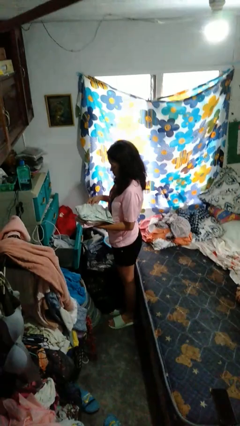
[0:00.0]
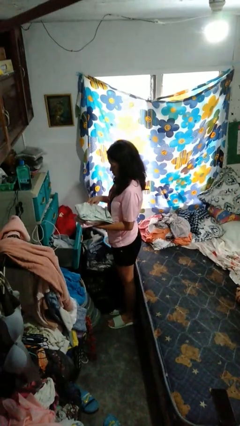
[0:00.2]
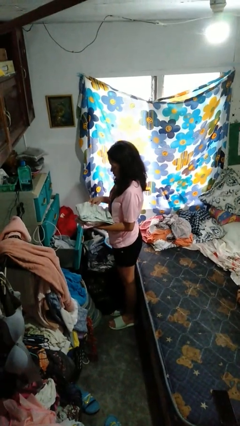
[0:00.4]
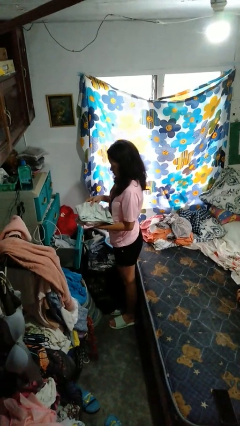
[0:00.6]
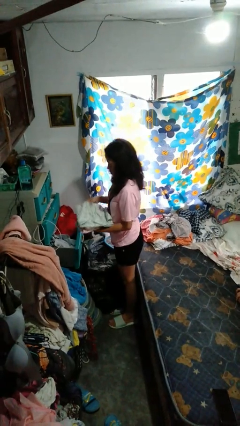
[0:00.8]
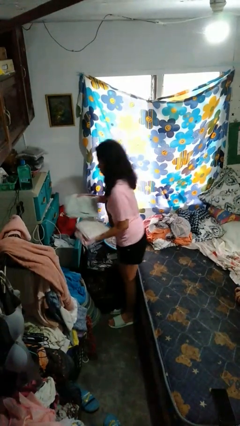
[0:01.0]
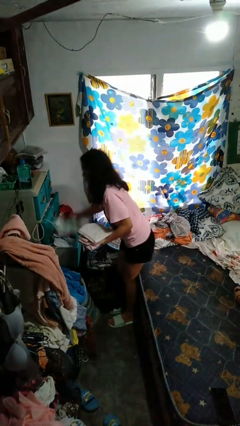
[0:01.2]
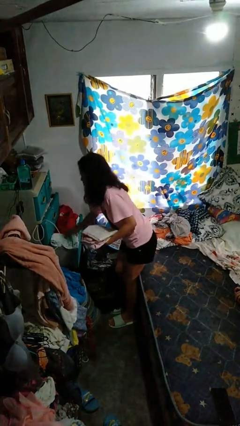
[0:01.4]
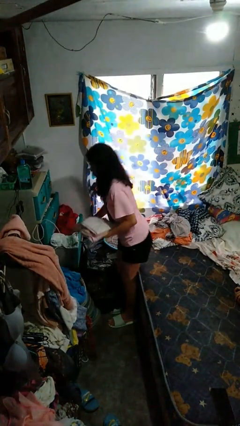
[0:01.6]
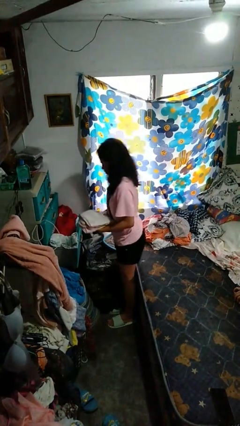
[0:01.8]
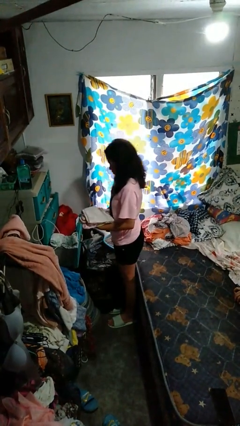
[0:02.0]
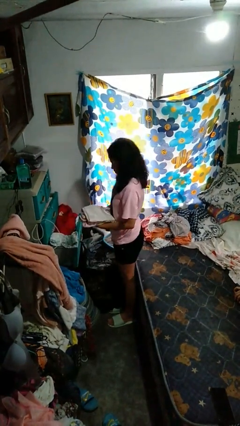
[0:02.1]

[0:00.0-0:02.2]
person puts clothes into dresser

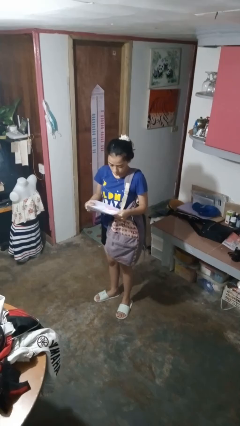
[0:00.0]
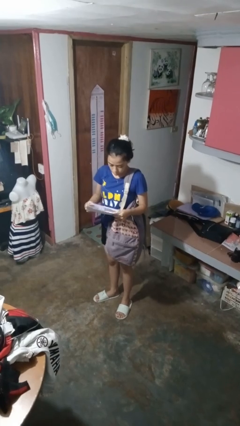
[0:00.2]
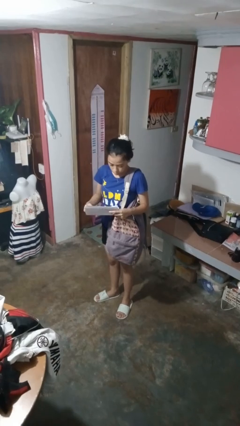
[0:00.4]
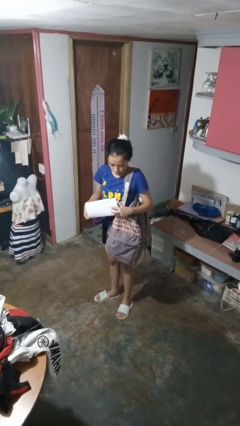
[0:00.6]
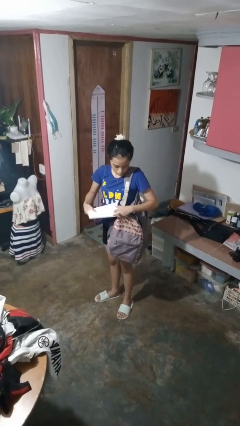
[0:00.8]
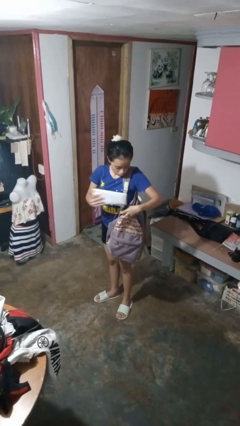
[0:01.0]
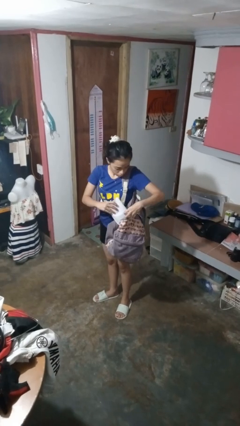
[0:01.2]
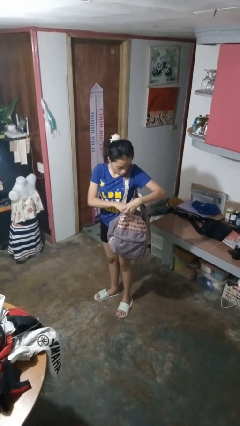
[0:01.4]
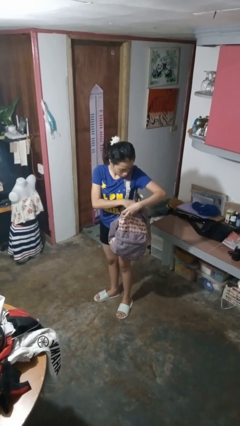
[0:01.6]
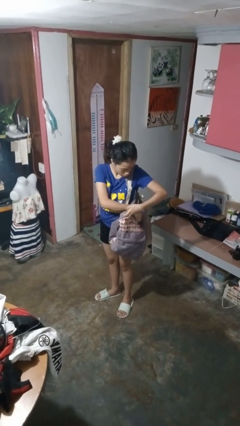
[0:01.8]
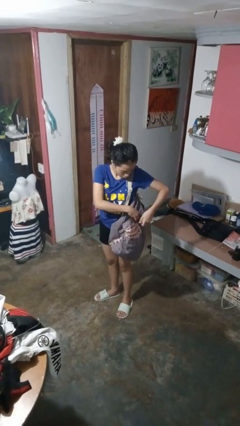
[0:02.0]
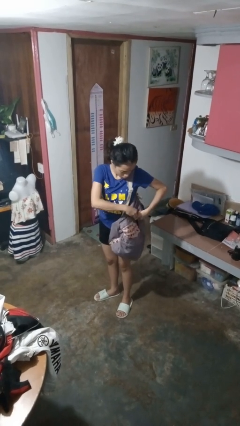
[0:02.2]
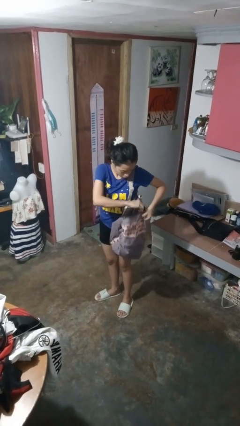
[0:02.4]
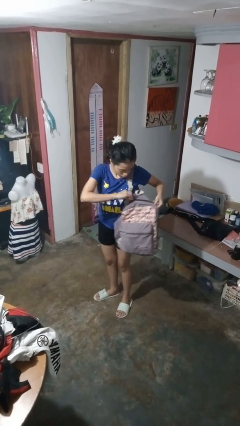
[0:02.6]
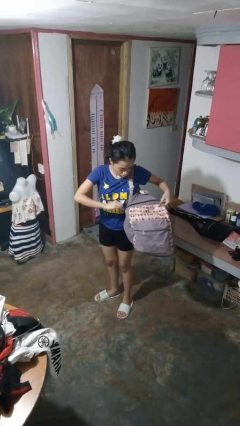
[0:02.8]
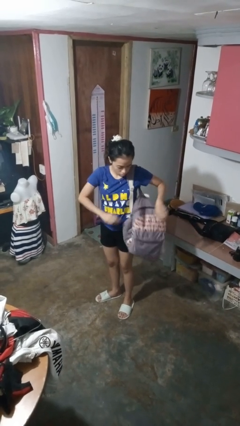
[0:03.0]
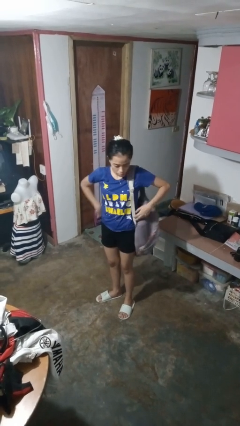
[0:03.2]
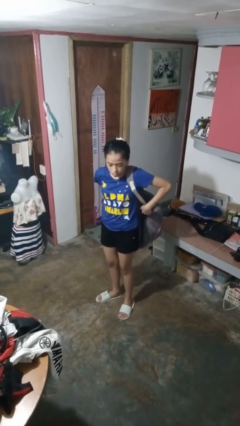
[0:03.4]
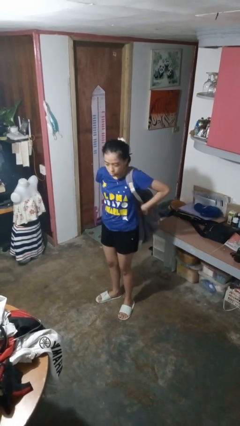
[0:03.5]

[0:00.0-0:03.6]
person puts object into backpack

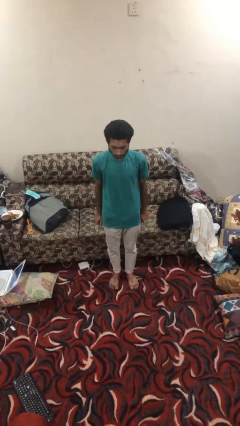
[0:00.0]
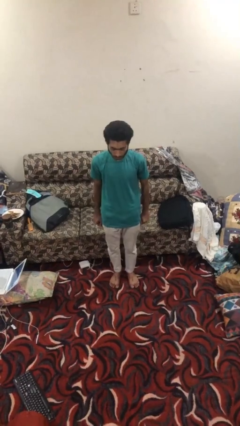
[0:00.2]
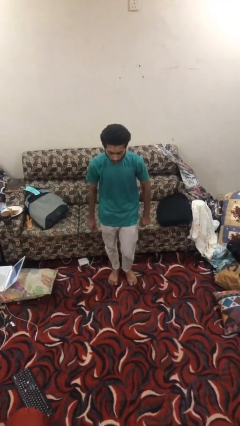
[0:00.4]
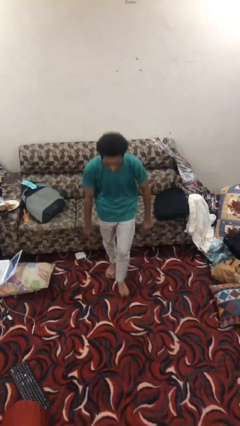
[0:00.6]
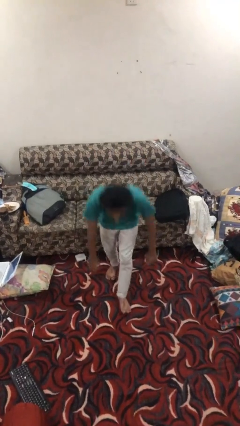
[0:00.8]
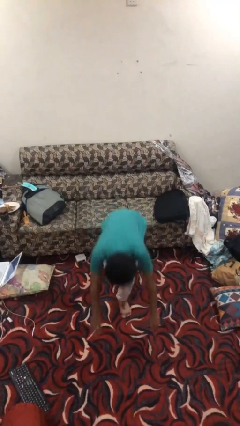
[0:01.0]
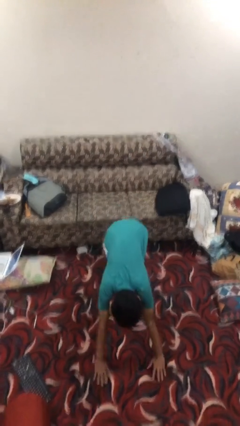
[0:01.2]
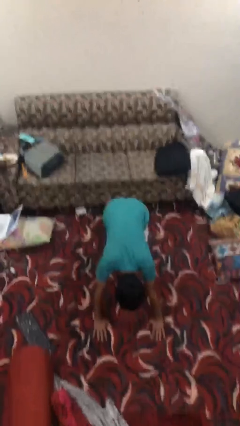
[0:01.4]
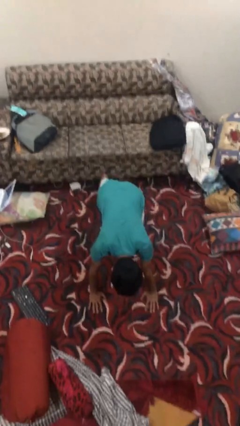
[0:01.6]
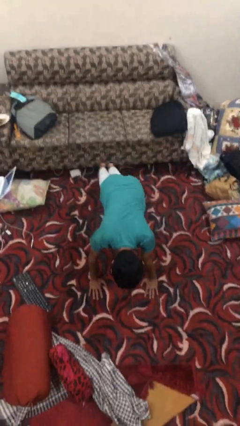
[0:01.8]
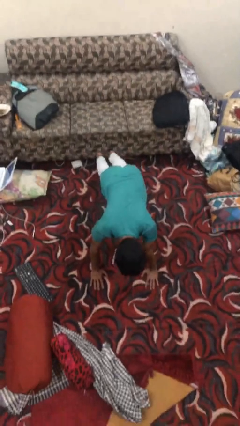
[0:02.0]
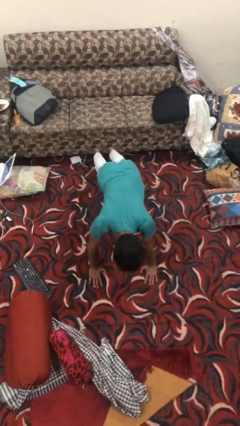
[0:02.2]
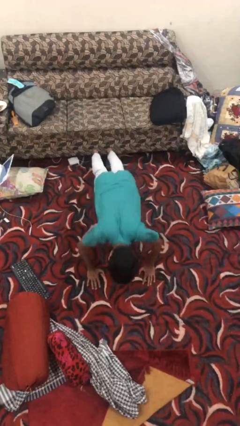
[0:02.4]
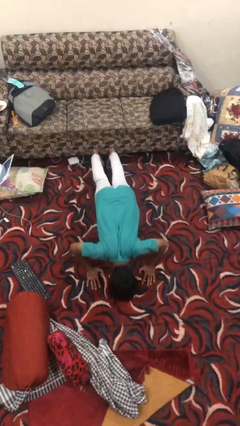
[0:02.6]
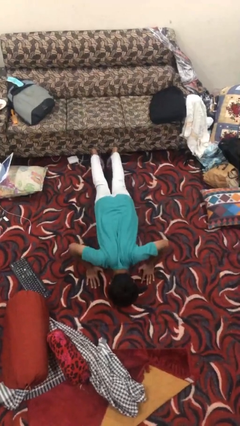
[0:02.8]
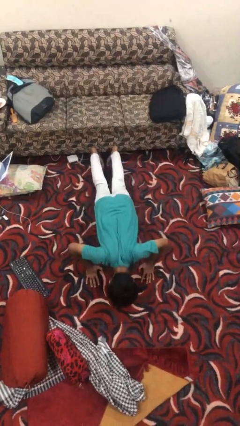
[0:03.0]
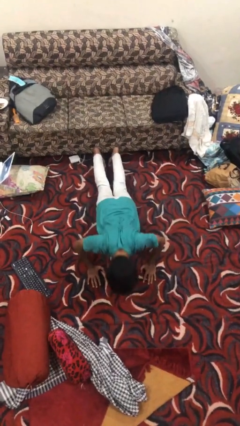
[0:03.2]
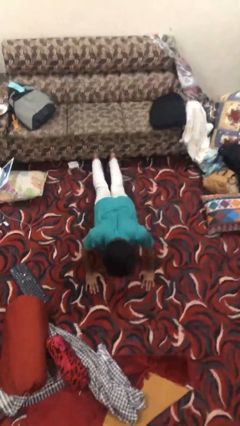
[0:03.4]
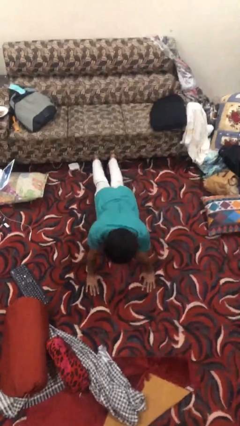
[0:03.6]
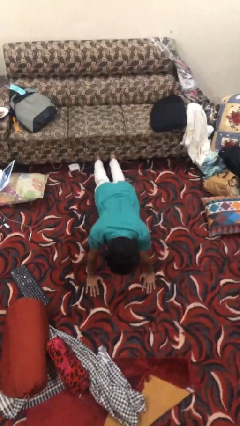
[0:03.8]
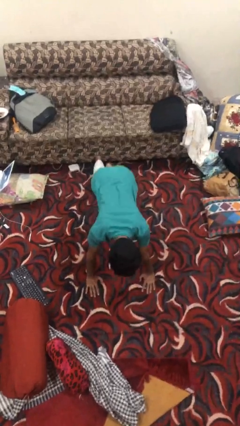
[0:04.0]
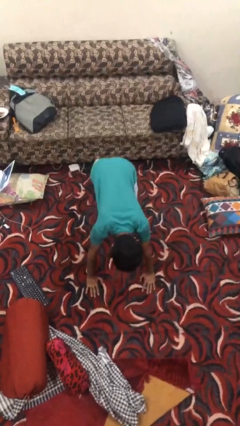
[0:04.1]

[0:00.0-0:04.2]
person exercises with pushup

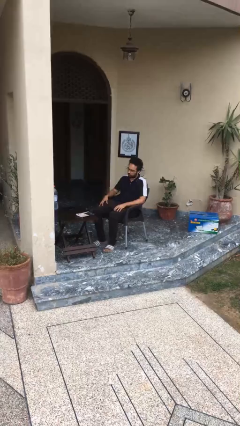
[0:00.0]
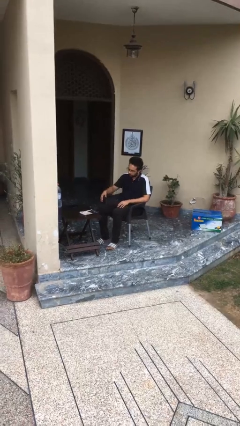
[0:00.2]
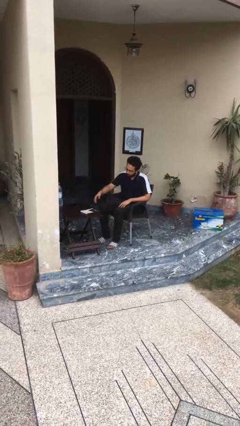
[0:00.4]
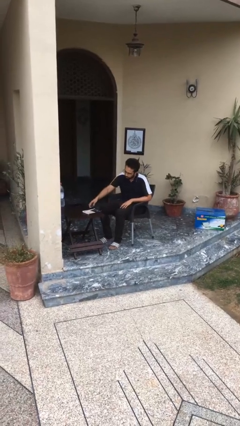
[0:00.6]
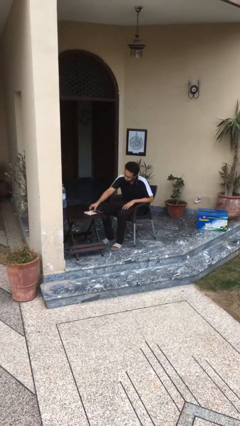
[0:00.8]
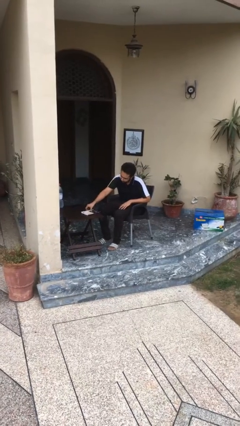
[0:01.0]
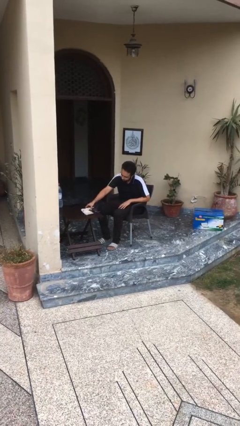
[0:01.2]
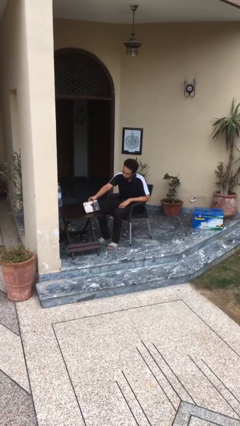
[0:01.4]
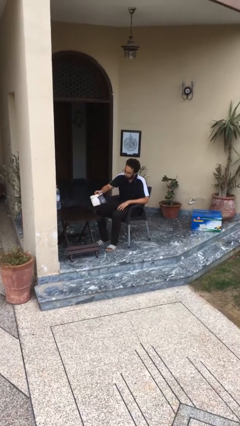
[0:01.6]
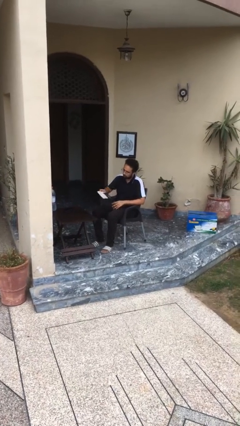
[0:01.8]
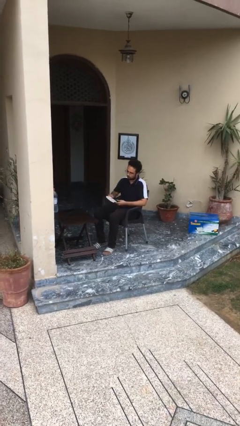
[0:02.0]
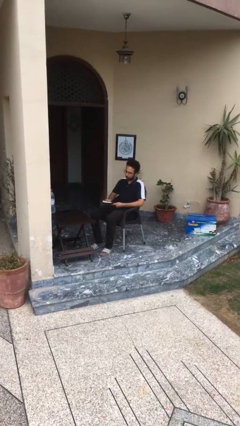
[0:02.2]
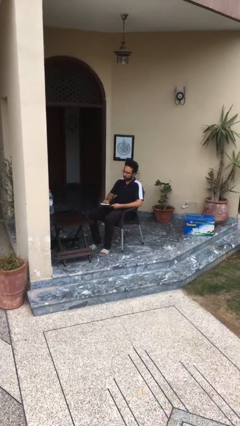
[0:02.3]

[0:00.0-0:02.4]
person picks up object from table

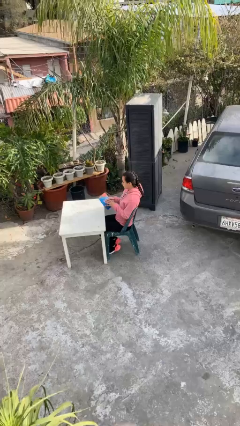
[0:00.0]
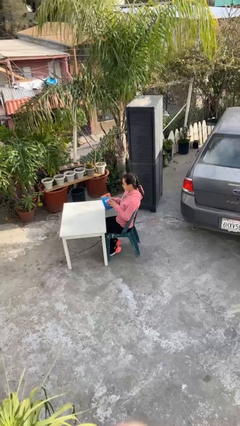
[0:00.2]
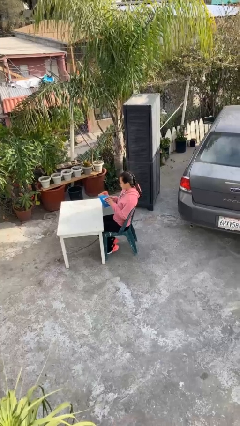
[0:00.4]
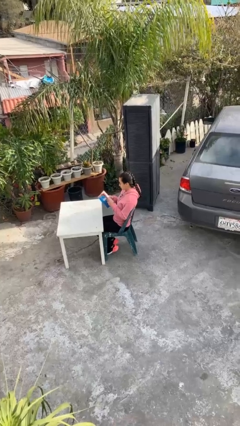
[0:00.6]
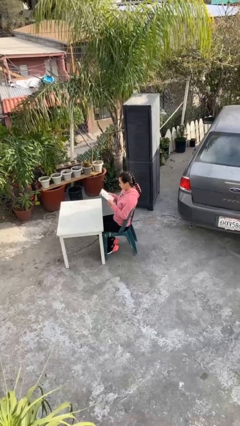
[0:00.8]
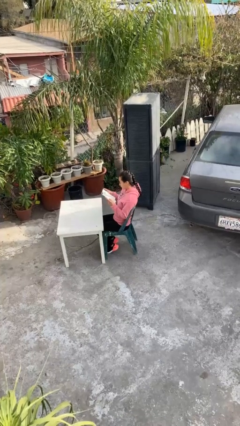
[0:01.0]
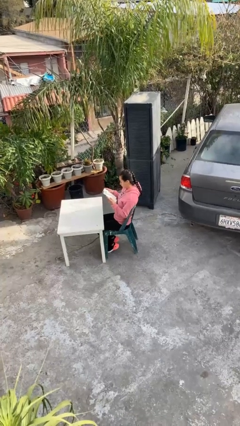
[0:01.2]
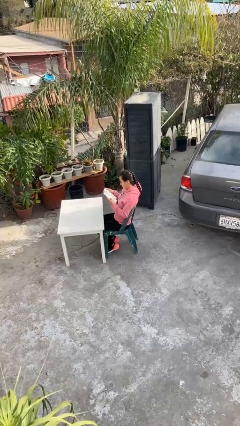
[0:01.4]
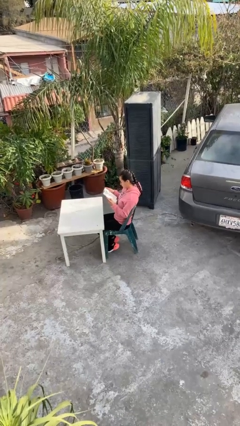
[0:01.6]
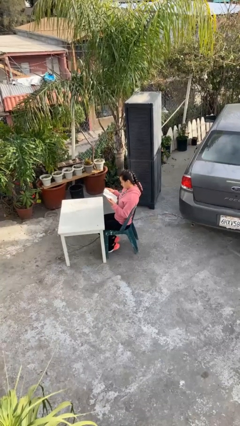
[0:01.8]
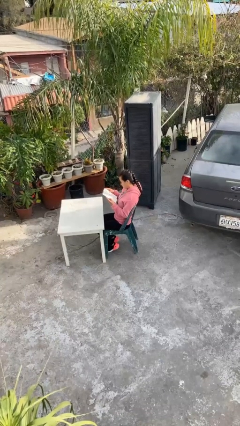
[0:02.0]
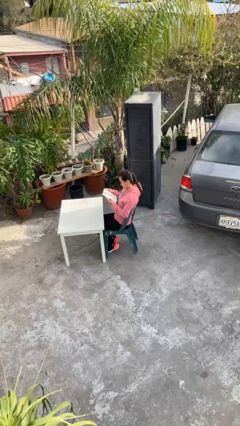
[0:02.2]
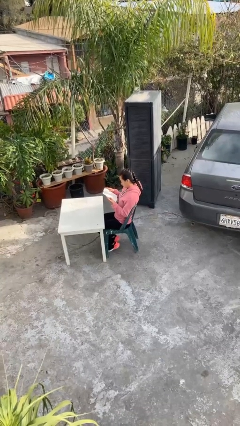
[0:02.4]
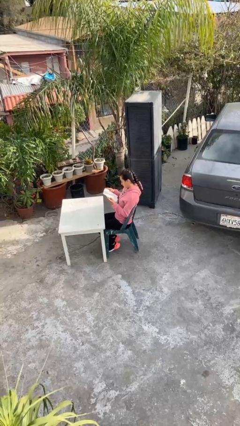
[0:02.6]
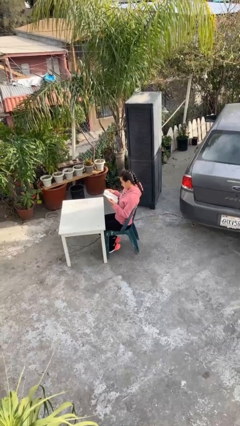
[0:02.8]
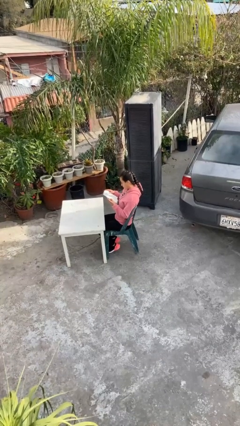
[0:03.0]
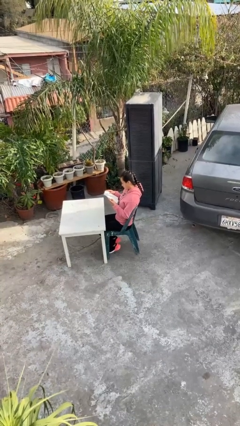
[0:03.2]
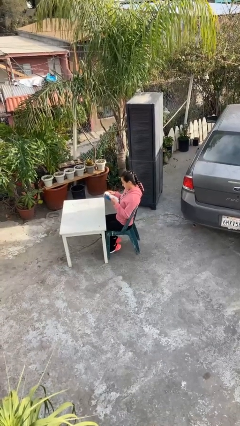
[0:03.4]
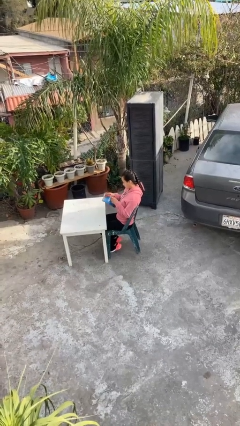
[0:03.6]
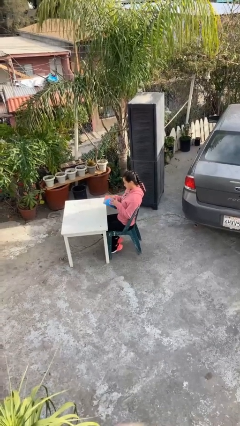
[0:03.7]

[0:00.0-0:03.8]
person reads document

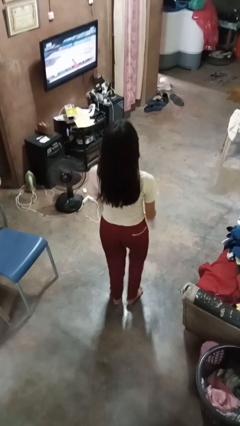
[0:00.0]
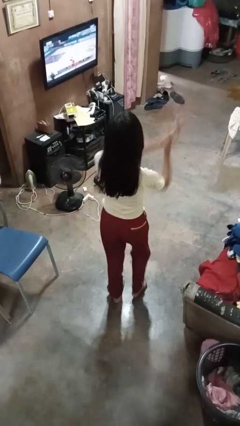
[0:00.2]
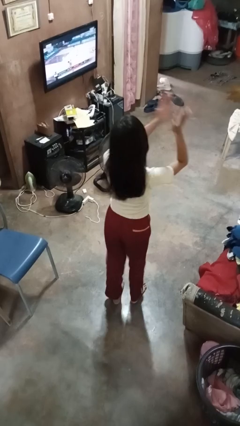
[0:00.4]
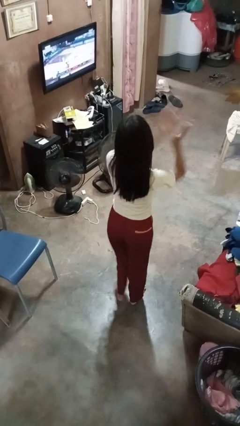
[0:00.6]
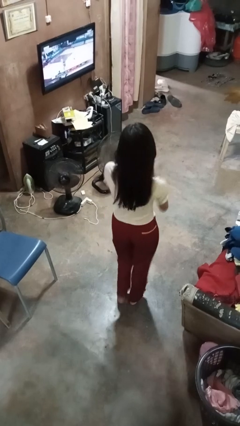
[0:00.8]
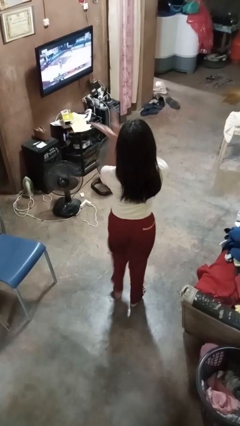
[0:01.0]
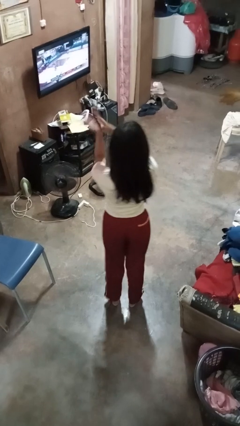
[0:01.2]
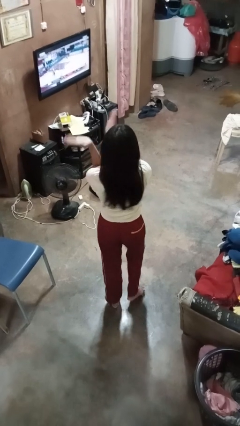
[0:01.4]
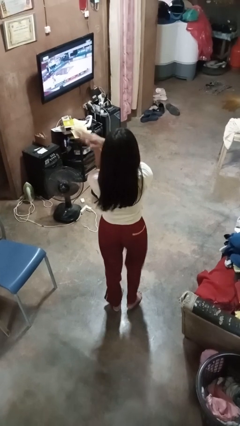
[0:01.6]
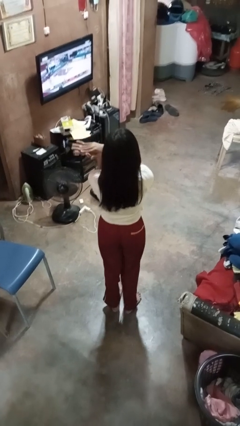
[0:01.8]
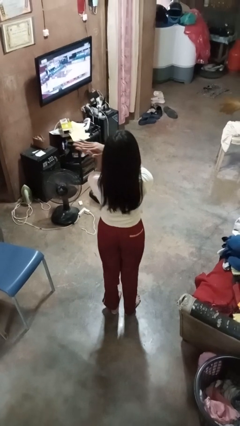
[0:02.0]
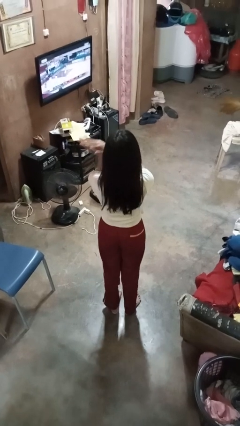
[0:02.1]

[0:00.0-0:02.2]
person dances in place
